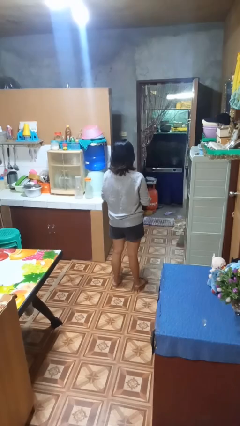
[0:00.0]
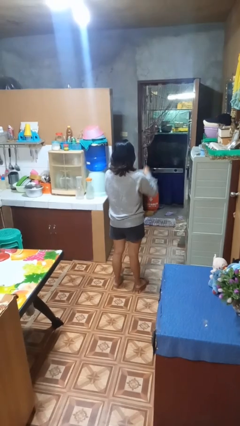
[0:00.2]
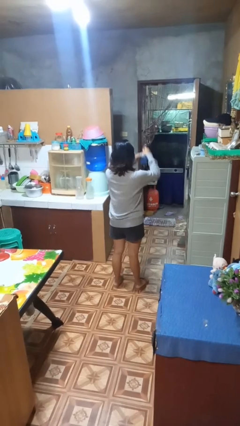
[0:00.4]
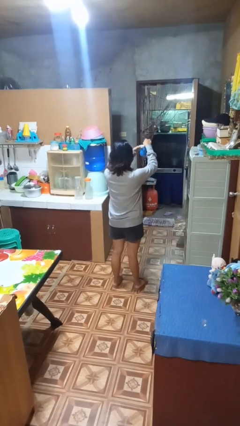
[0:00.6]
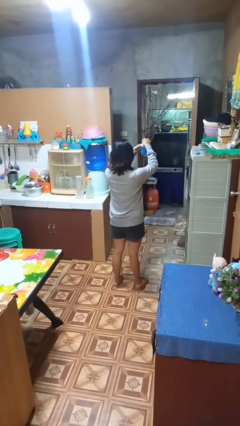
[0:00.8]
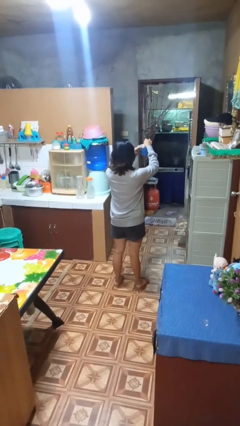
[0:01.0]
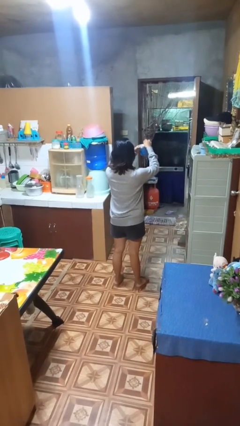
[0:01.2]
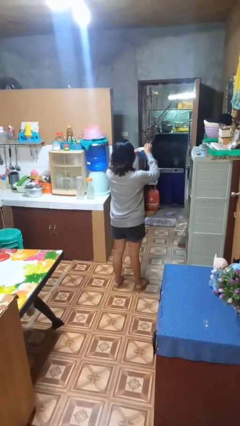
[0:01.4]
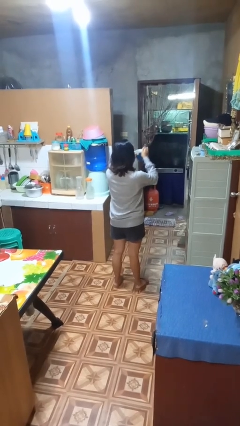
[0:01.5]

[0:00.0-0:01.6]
person stirs mug

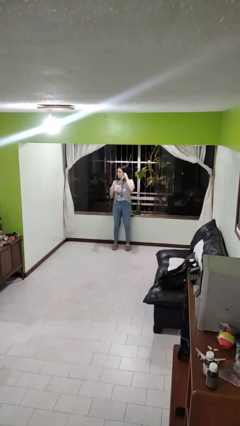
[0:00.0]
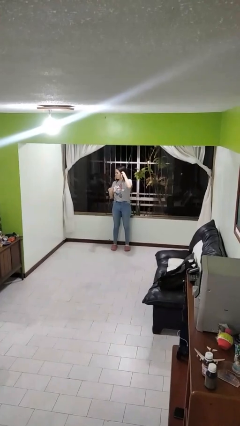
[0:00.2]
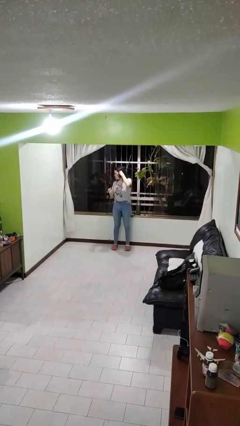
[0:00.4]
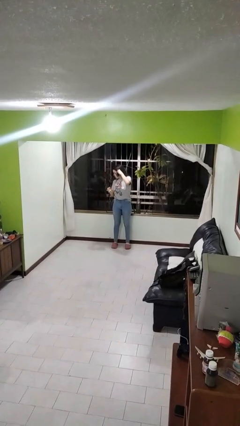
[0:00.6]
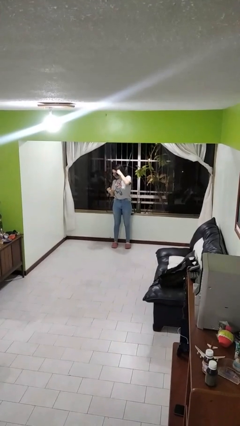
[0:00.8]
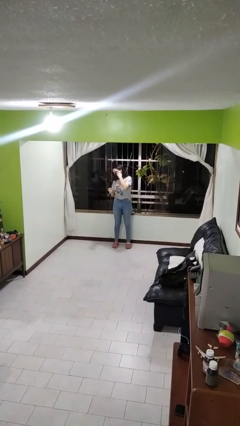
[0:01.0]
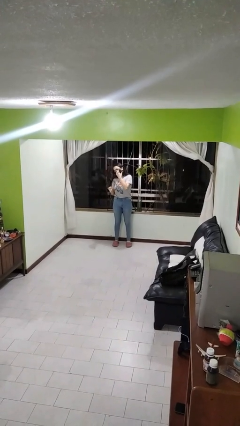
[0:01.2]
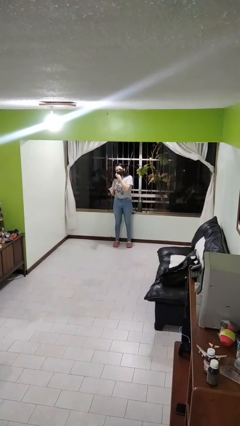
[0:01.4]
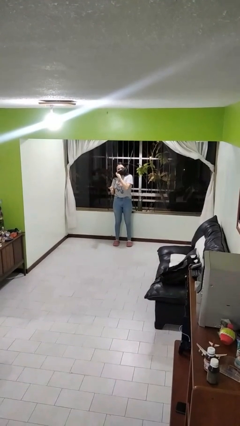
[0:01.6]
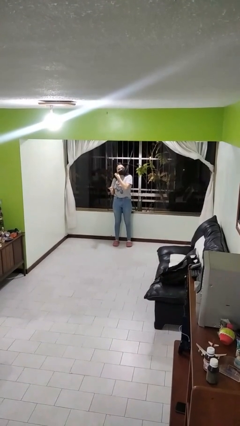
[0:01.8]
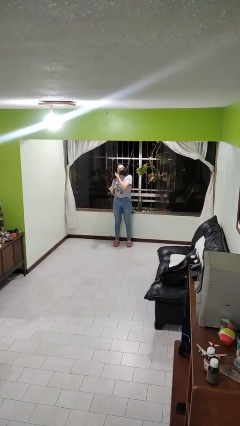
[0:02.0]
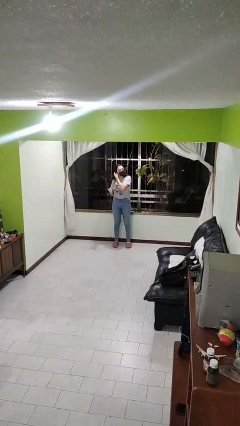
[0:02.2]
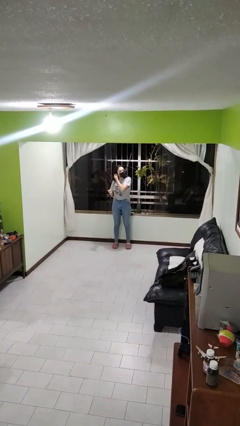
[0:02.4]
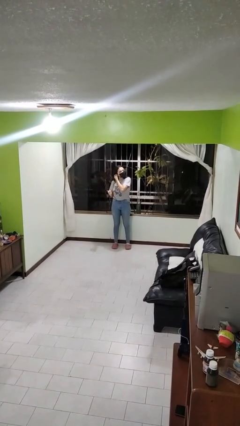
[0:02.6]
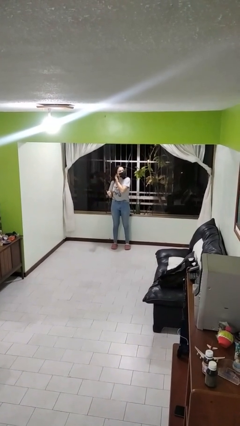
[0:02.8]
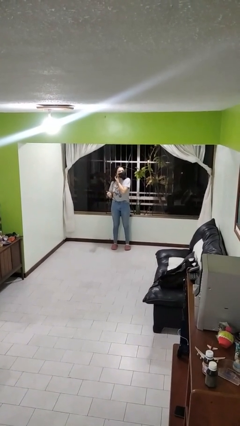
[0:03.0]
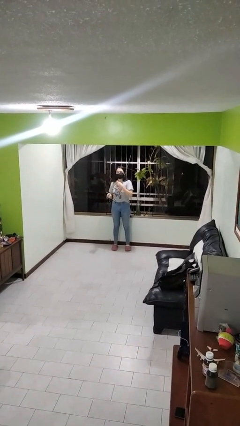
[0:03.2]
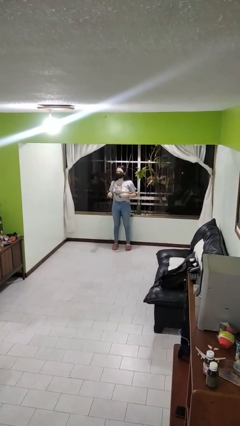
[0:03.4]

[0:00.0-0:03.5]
person puts on facemask

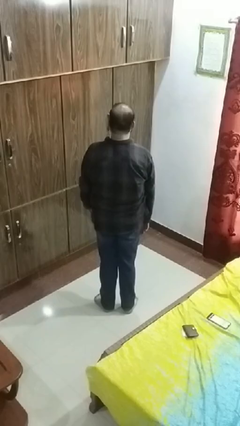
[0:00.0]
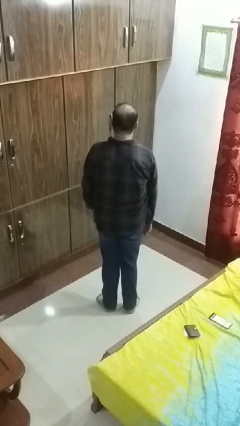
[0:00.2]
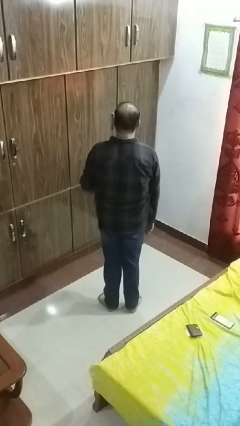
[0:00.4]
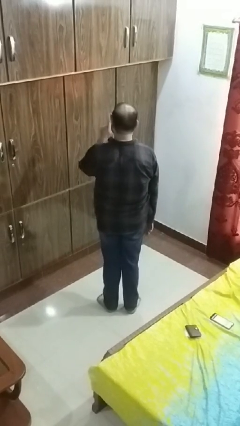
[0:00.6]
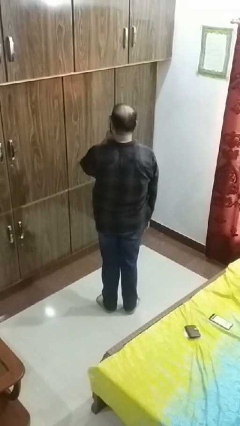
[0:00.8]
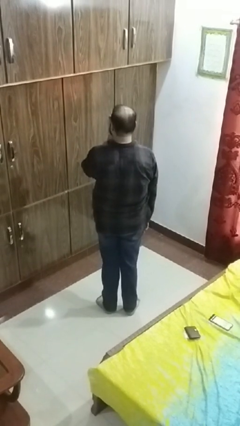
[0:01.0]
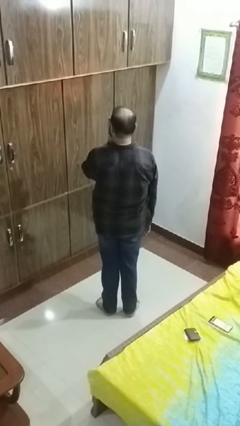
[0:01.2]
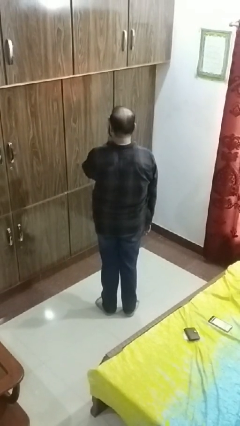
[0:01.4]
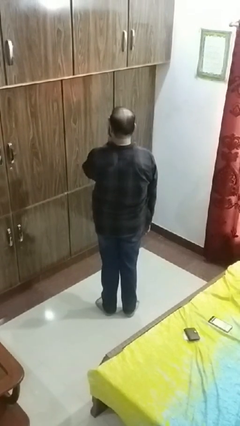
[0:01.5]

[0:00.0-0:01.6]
person gestures be quiet

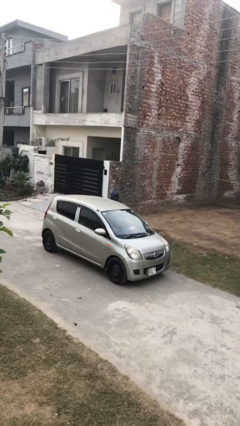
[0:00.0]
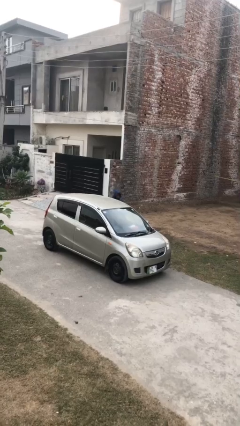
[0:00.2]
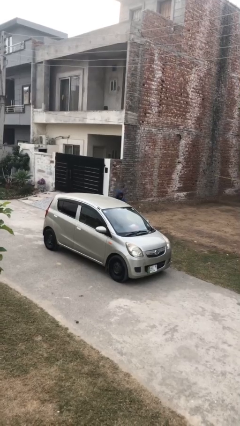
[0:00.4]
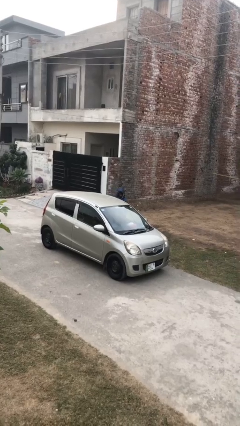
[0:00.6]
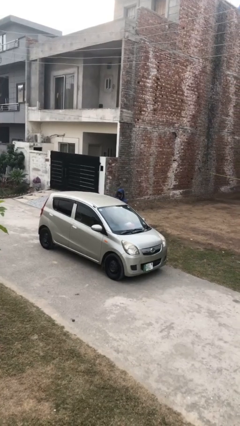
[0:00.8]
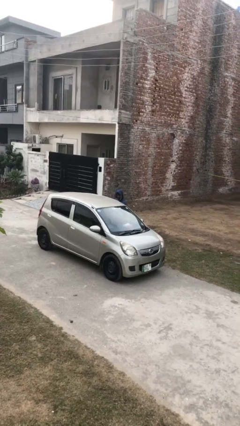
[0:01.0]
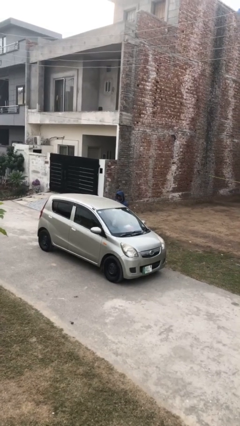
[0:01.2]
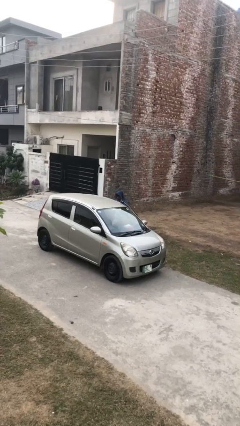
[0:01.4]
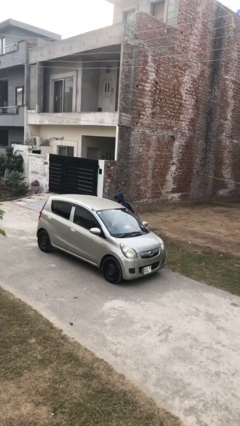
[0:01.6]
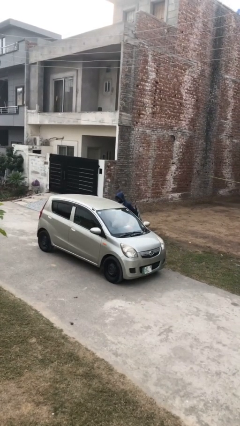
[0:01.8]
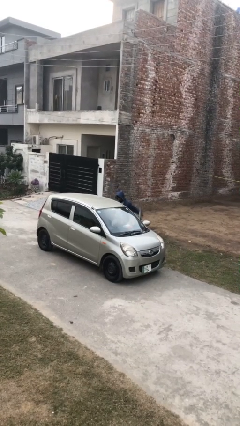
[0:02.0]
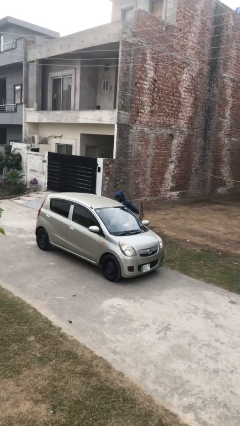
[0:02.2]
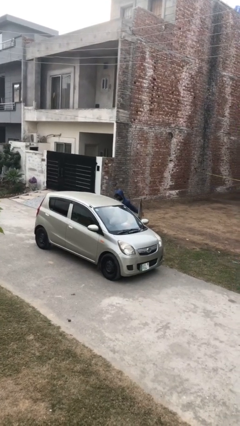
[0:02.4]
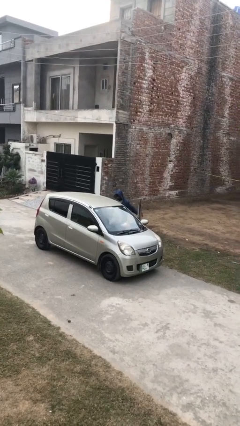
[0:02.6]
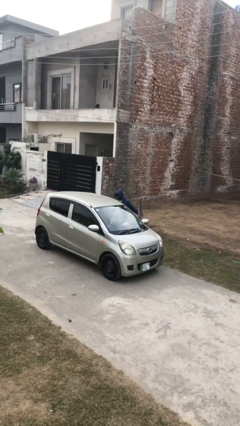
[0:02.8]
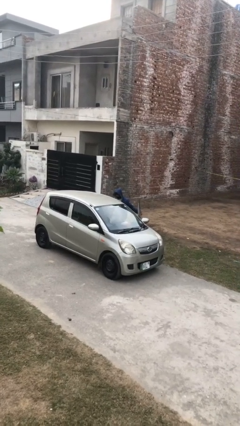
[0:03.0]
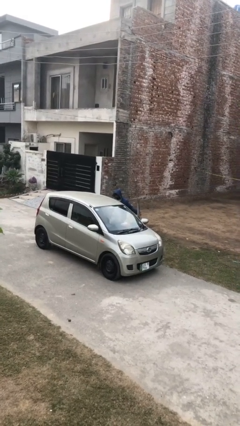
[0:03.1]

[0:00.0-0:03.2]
person opens car door

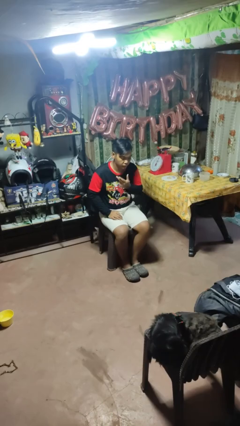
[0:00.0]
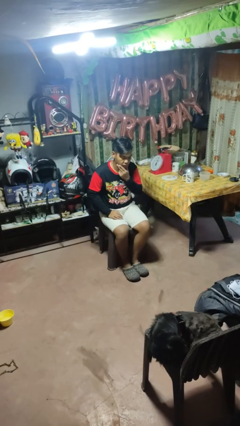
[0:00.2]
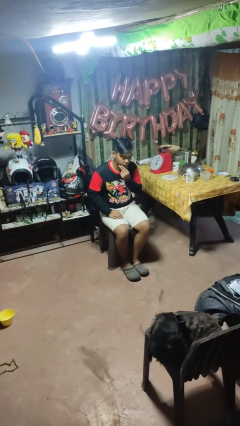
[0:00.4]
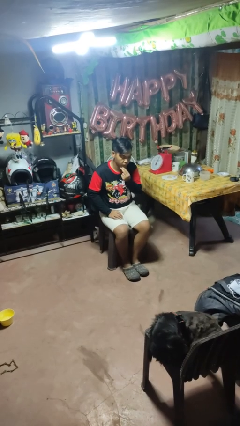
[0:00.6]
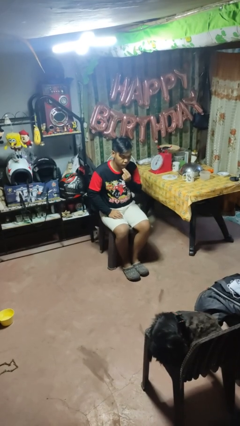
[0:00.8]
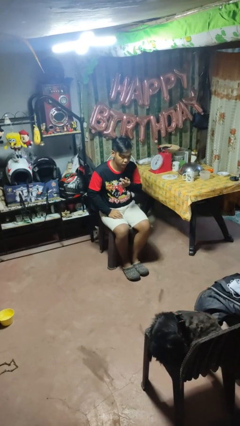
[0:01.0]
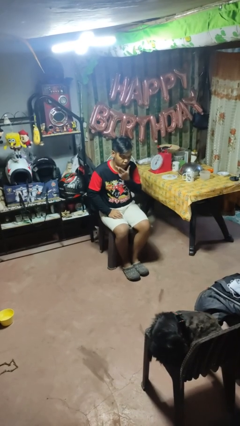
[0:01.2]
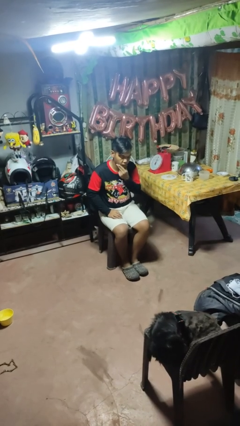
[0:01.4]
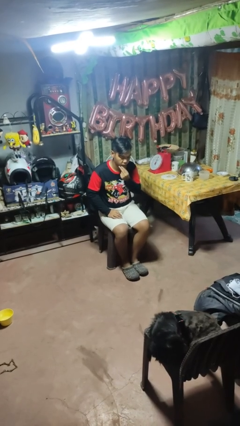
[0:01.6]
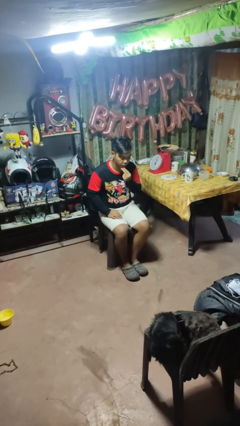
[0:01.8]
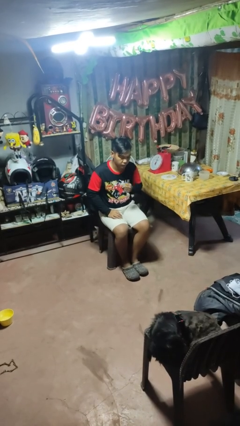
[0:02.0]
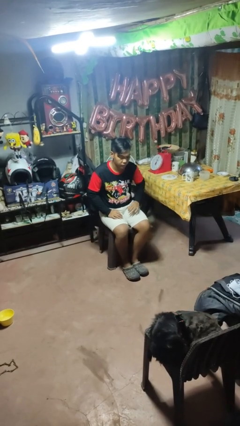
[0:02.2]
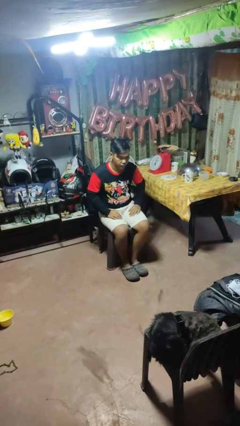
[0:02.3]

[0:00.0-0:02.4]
person strokes chin

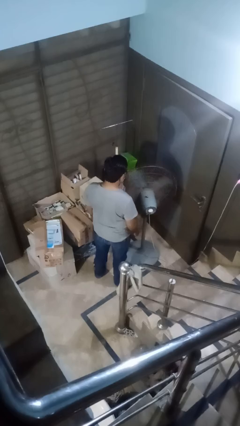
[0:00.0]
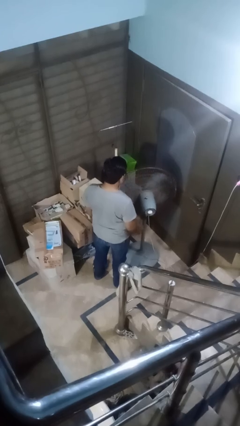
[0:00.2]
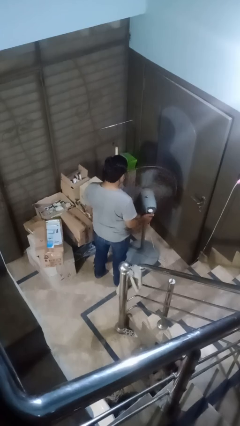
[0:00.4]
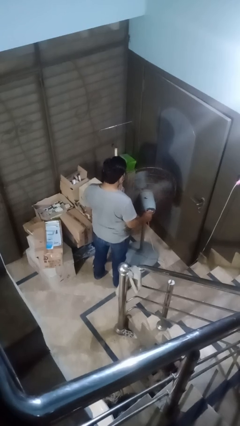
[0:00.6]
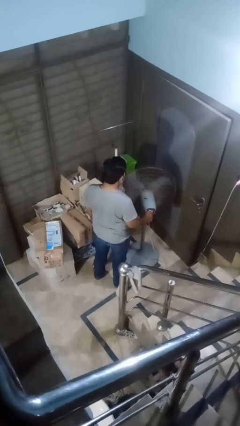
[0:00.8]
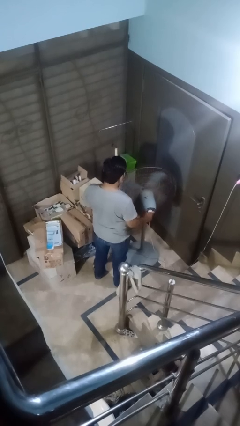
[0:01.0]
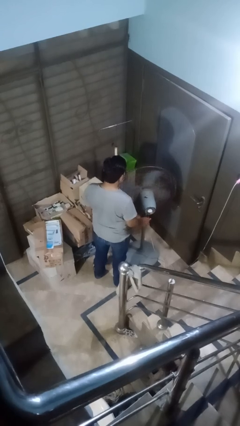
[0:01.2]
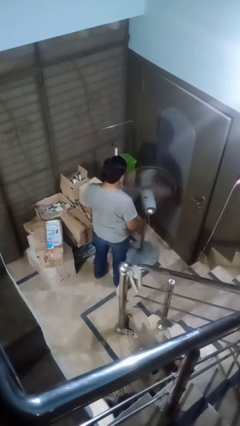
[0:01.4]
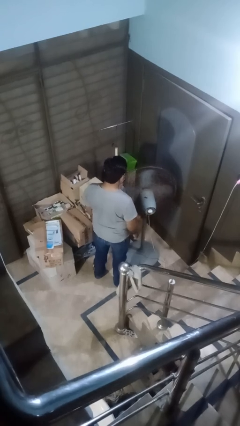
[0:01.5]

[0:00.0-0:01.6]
person turns off fan

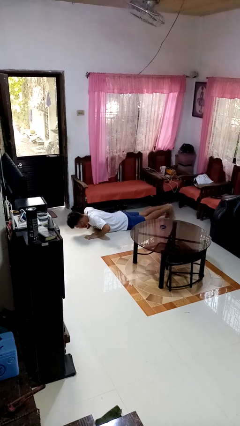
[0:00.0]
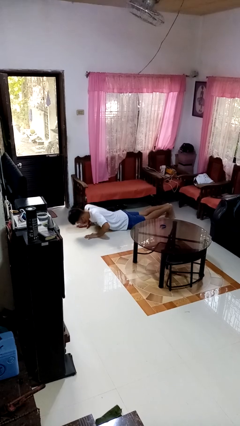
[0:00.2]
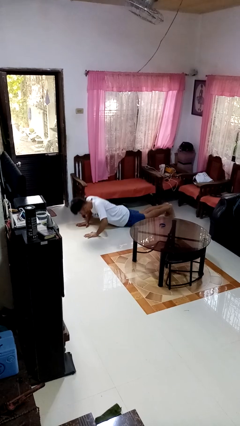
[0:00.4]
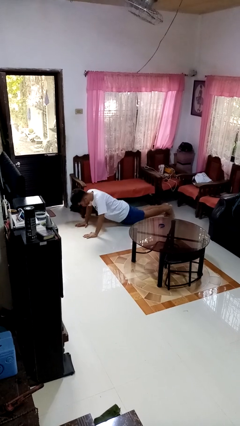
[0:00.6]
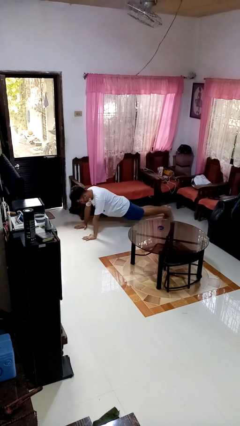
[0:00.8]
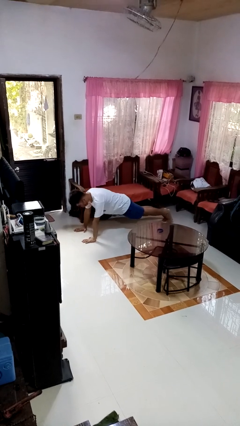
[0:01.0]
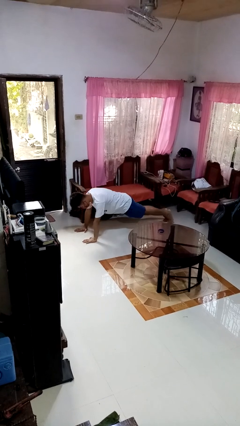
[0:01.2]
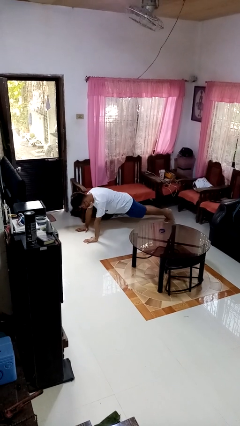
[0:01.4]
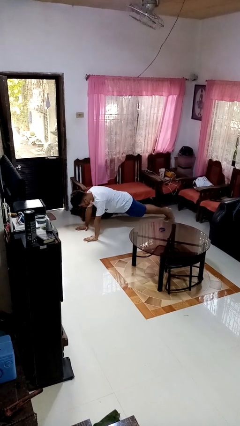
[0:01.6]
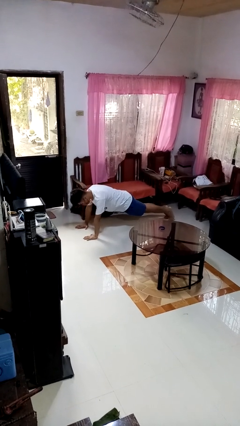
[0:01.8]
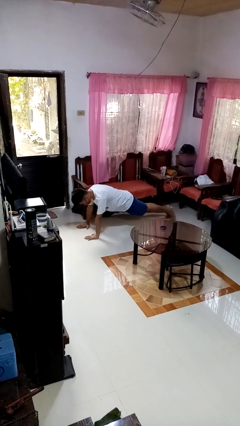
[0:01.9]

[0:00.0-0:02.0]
person exercises with pushup

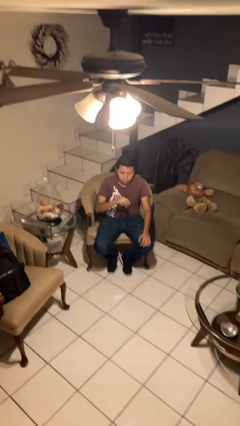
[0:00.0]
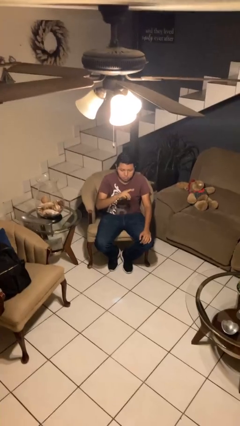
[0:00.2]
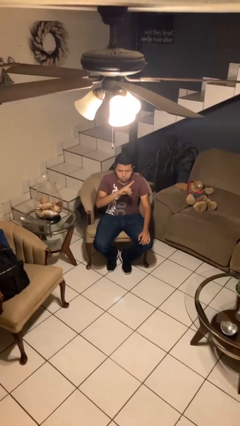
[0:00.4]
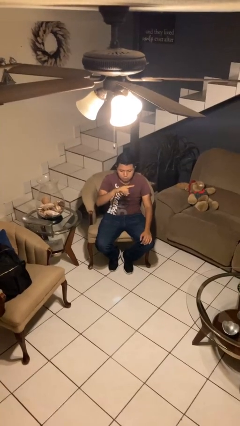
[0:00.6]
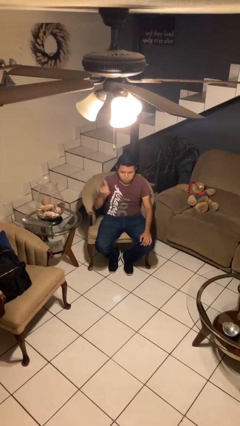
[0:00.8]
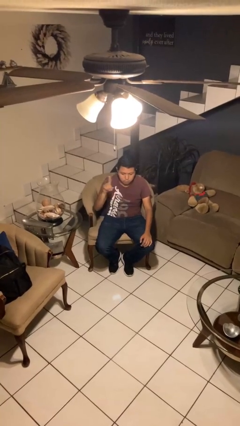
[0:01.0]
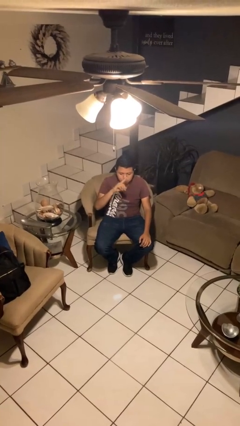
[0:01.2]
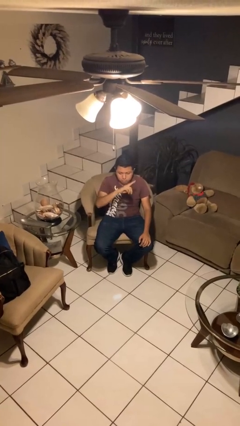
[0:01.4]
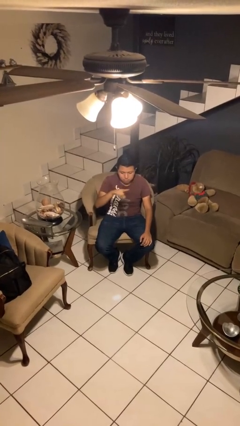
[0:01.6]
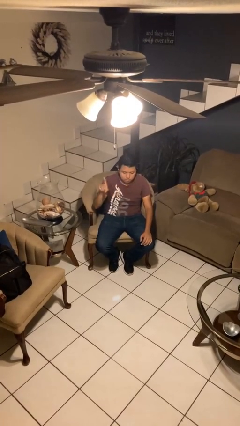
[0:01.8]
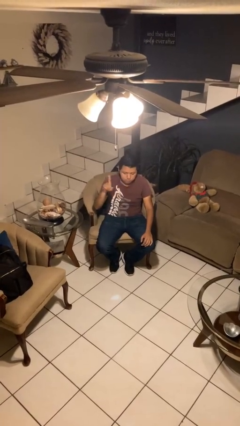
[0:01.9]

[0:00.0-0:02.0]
person gestures swipe right
